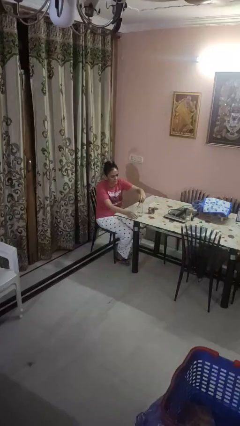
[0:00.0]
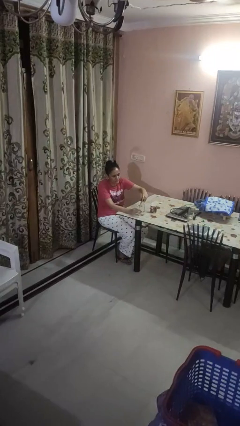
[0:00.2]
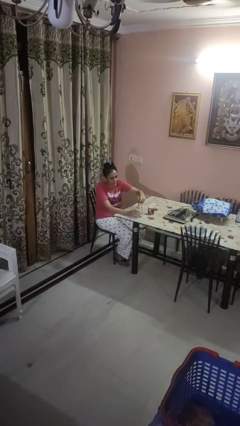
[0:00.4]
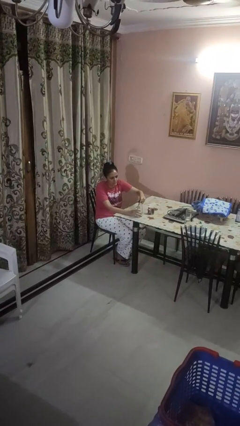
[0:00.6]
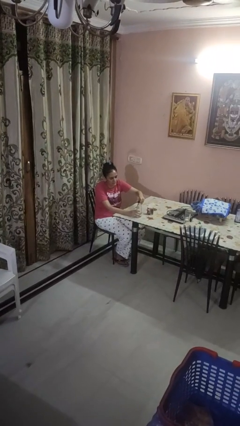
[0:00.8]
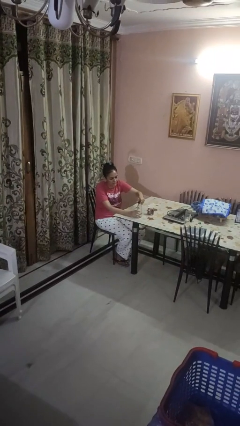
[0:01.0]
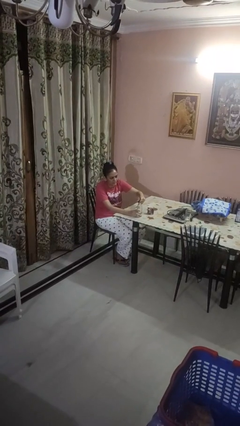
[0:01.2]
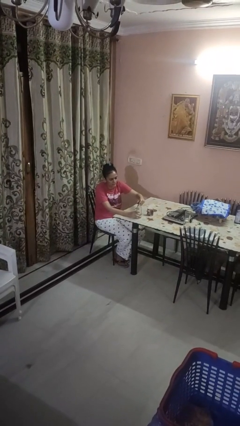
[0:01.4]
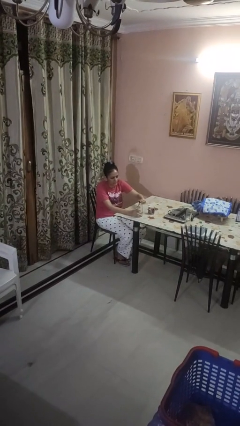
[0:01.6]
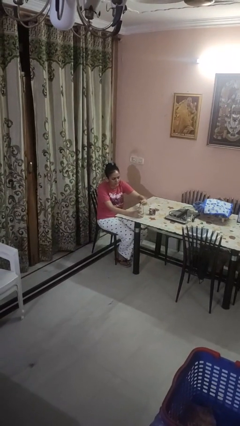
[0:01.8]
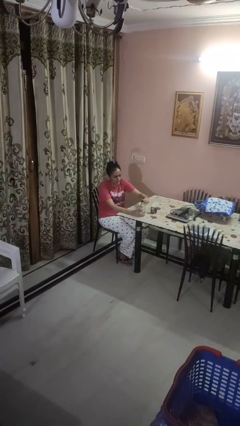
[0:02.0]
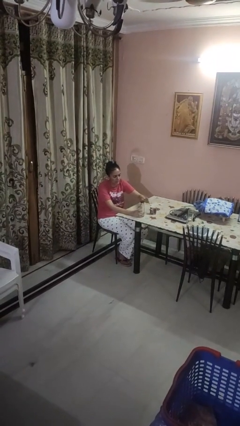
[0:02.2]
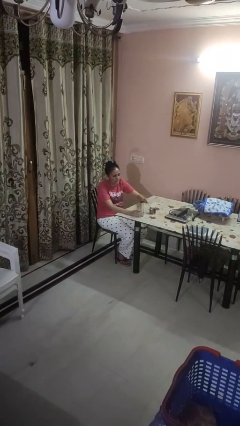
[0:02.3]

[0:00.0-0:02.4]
person screws lid to bottle

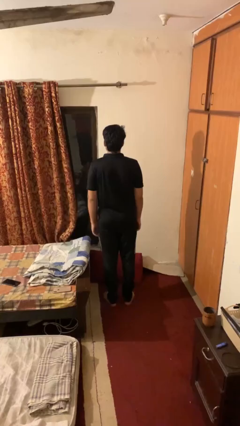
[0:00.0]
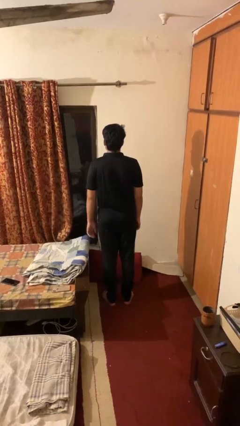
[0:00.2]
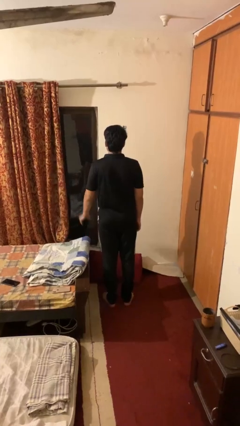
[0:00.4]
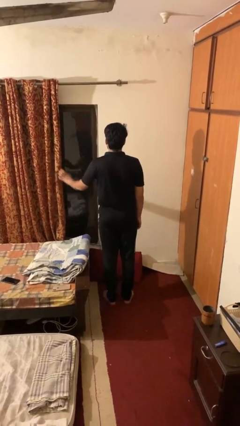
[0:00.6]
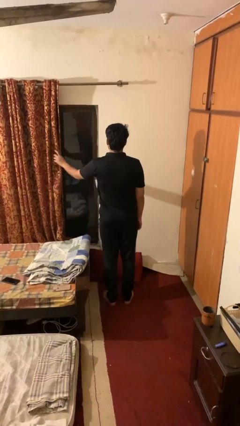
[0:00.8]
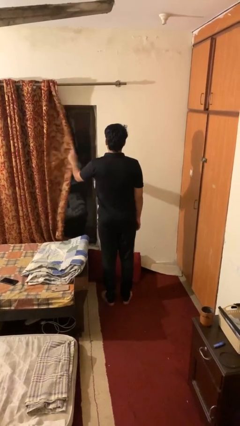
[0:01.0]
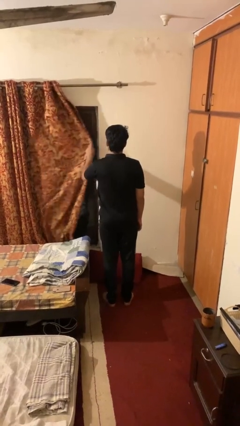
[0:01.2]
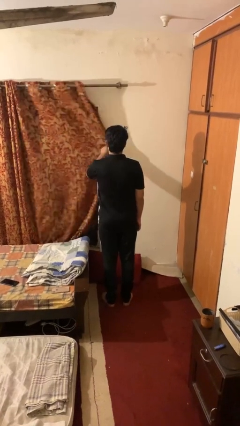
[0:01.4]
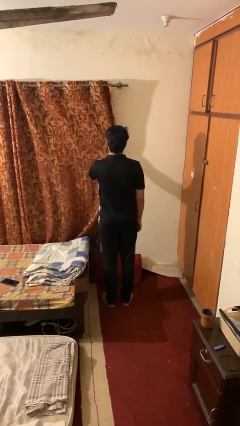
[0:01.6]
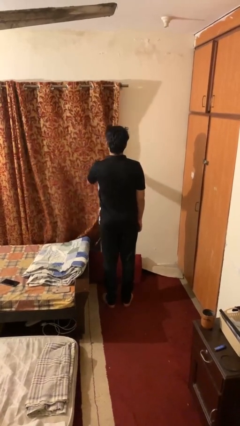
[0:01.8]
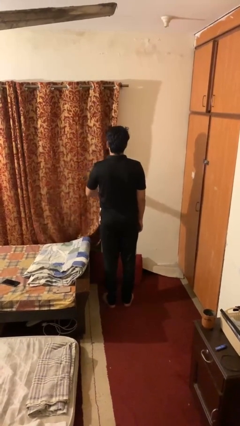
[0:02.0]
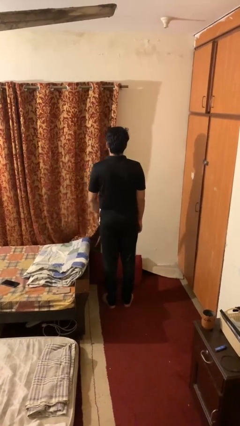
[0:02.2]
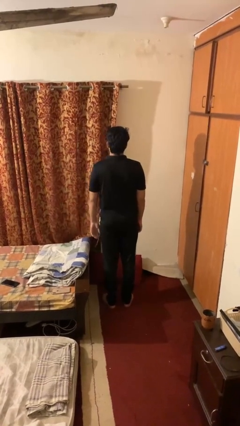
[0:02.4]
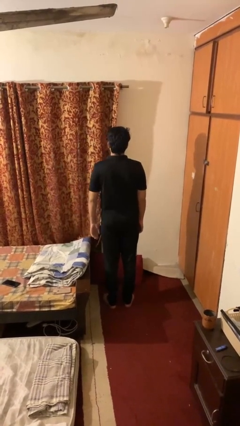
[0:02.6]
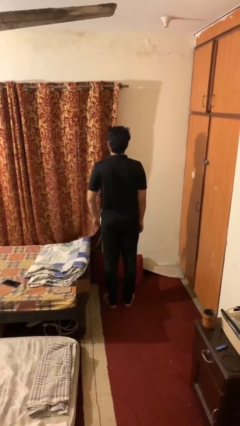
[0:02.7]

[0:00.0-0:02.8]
person closes curtains

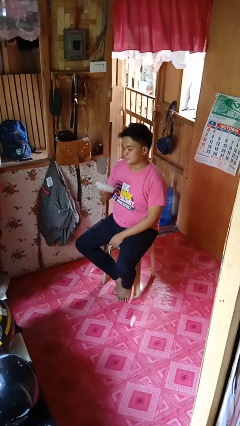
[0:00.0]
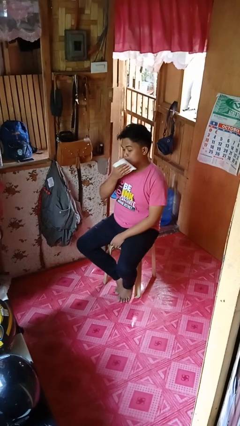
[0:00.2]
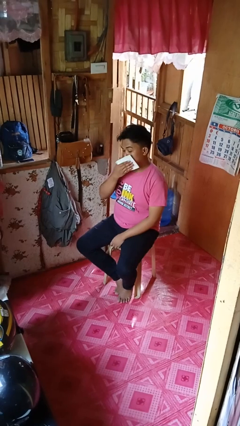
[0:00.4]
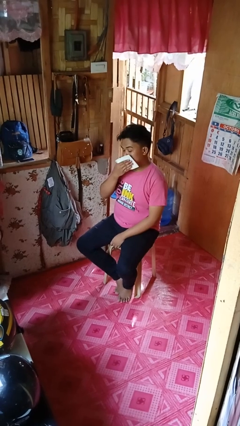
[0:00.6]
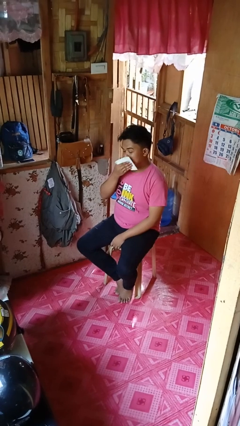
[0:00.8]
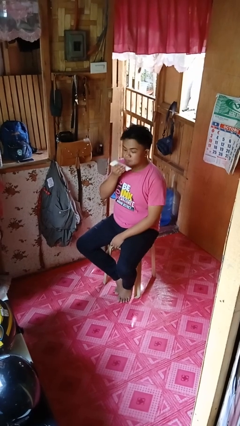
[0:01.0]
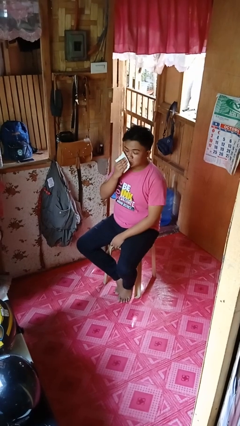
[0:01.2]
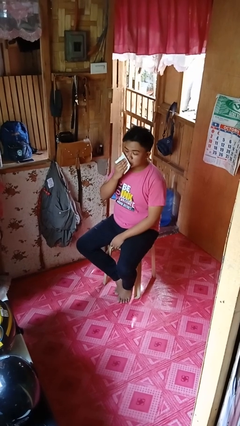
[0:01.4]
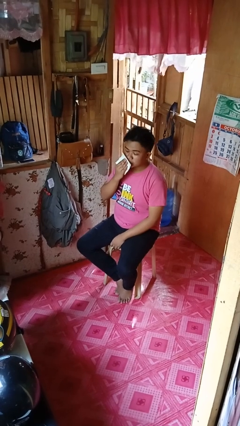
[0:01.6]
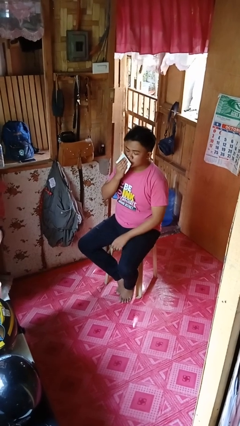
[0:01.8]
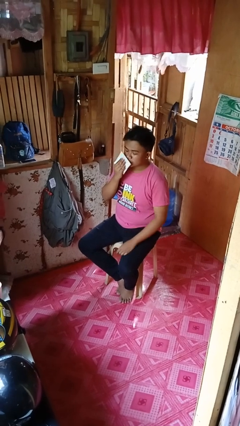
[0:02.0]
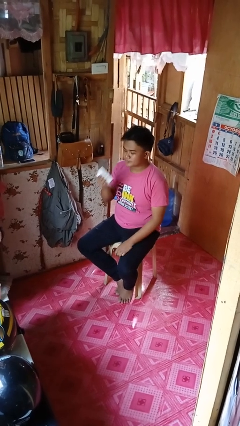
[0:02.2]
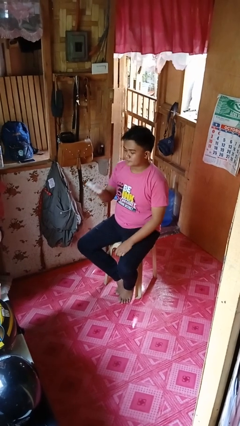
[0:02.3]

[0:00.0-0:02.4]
person wipes mouth with napkin

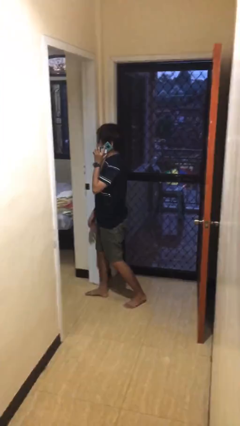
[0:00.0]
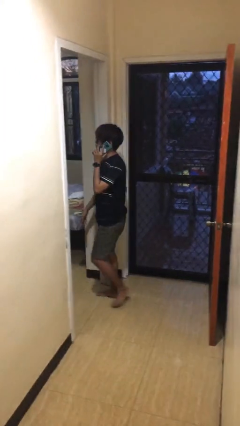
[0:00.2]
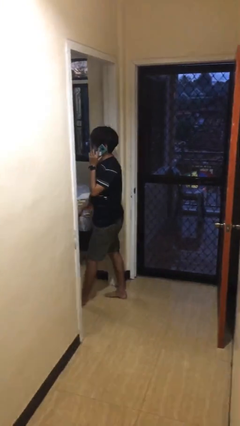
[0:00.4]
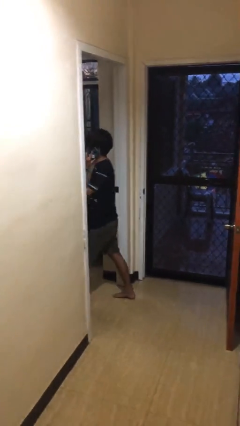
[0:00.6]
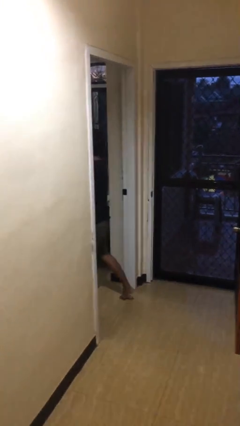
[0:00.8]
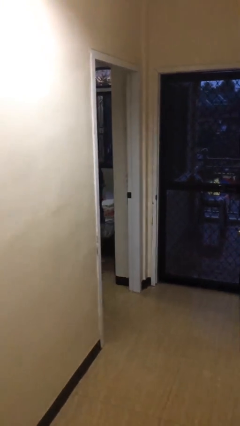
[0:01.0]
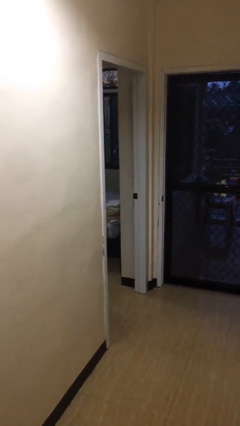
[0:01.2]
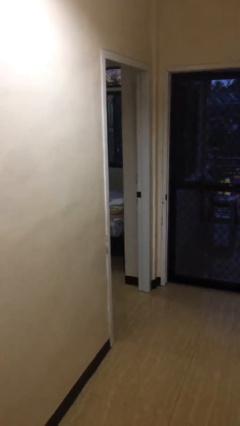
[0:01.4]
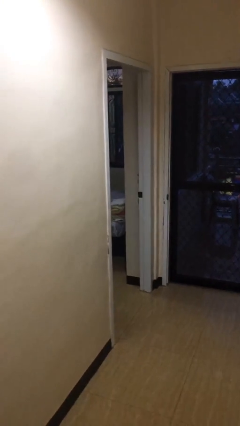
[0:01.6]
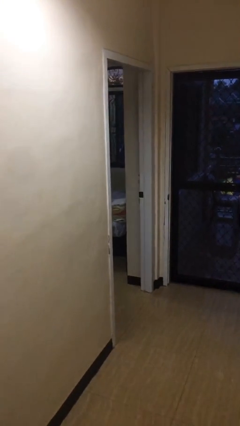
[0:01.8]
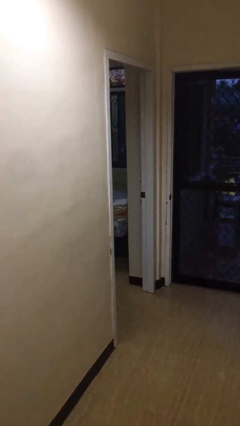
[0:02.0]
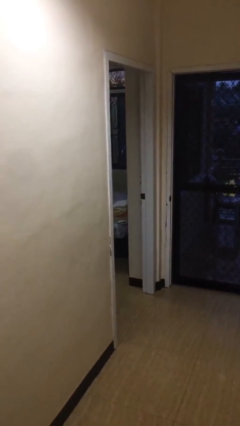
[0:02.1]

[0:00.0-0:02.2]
person exits scene through structure

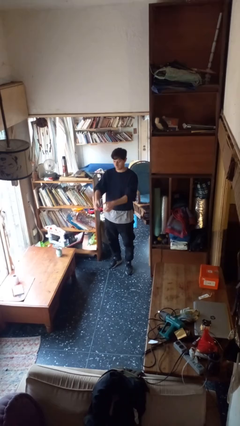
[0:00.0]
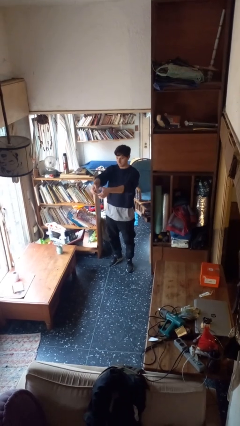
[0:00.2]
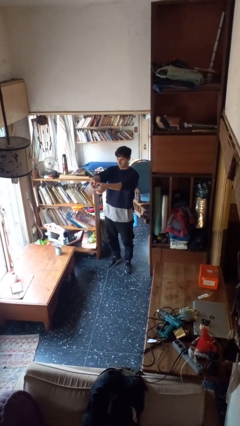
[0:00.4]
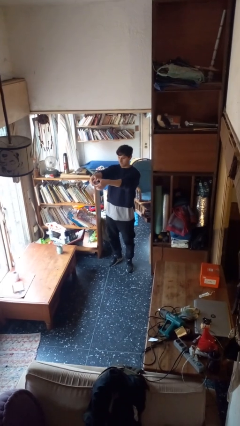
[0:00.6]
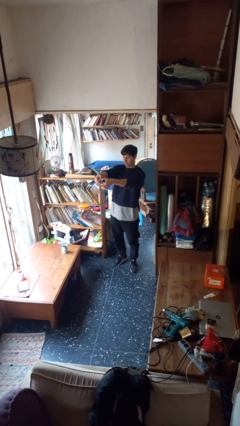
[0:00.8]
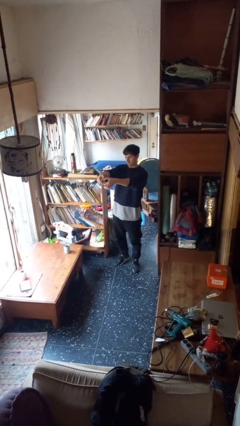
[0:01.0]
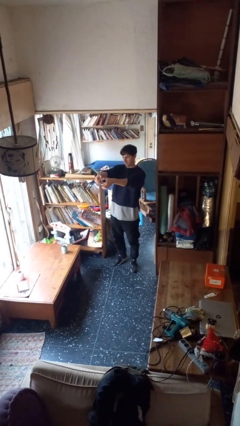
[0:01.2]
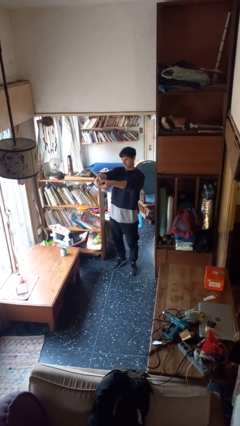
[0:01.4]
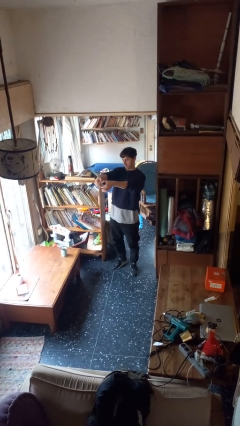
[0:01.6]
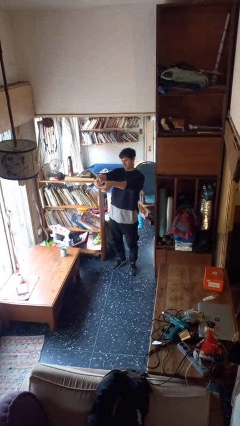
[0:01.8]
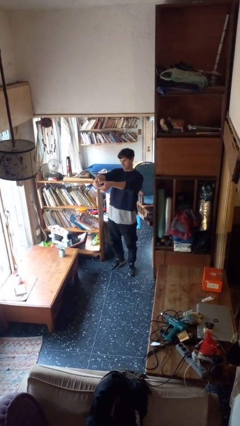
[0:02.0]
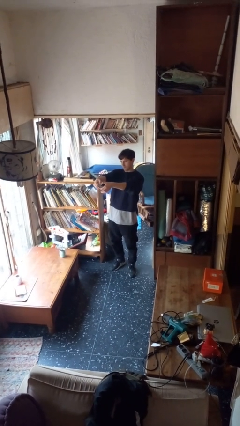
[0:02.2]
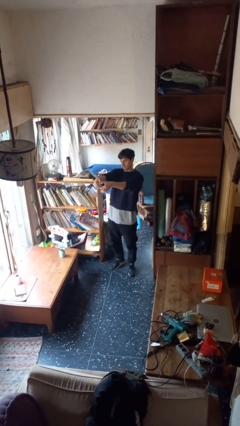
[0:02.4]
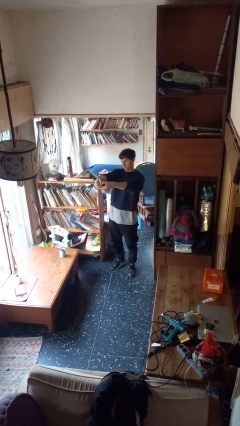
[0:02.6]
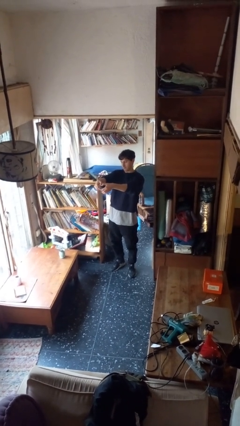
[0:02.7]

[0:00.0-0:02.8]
person gestures heart

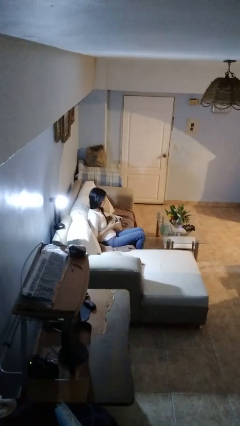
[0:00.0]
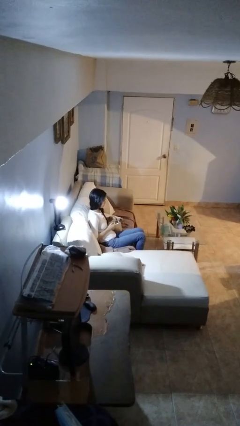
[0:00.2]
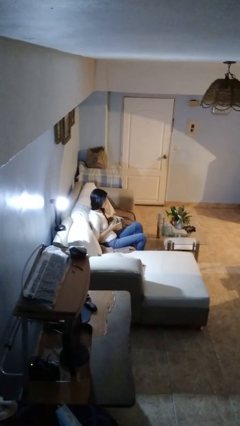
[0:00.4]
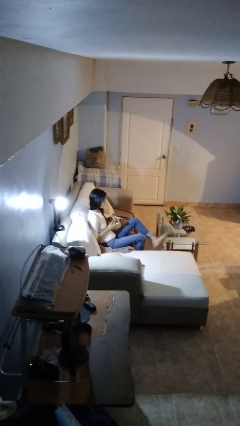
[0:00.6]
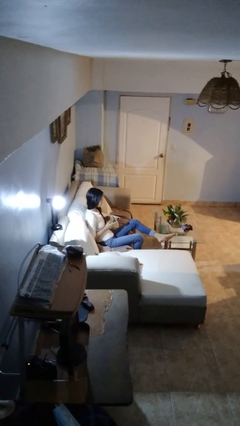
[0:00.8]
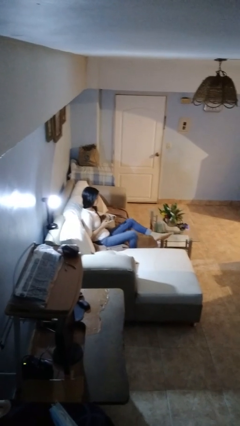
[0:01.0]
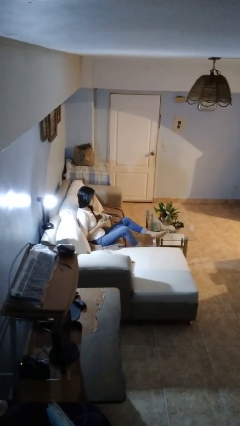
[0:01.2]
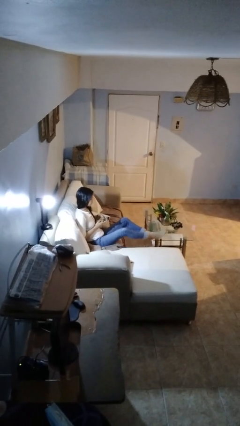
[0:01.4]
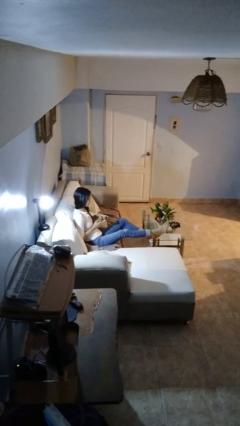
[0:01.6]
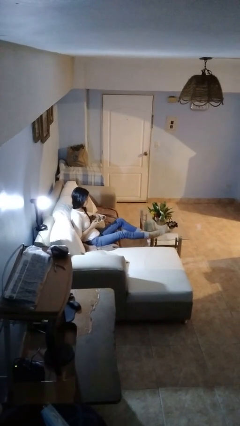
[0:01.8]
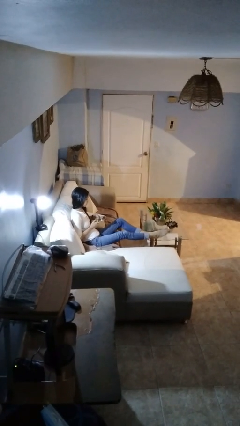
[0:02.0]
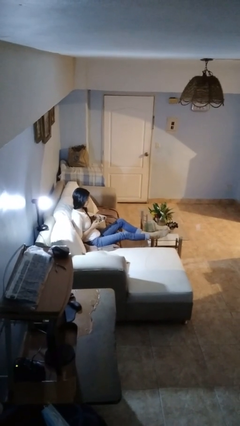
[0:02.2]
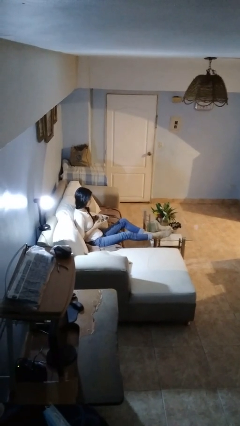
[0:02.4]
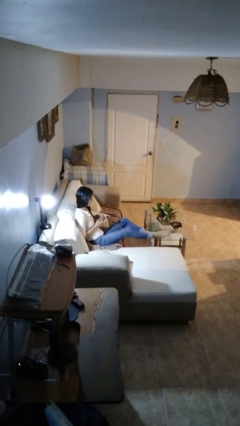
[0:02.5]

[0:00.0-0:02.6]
person puts feet up

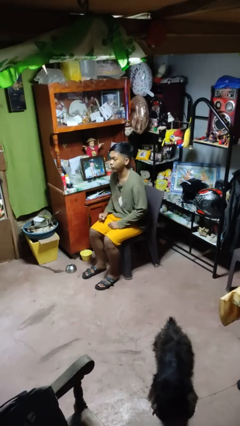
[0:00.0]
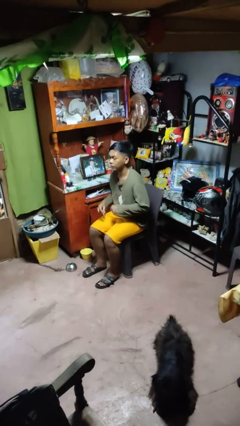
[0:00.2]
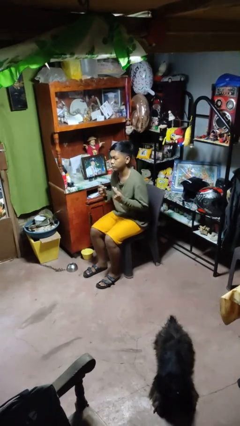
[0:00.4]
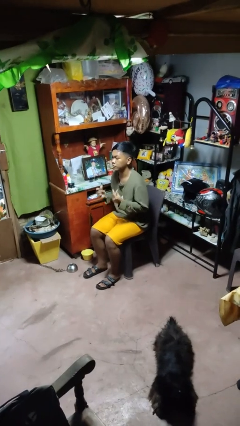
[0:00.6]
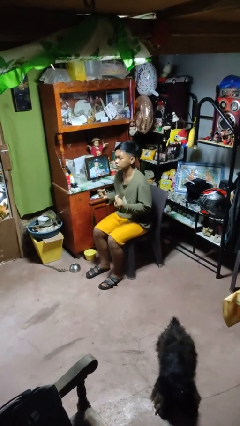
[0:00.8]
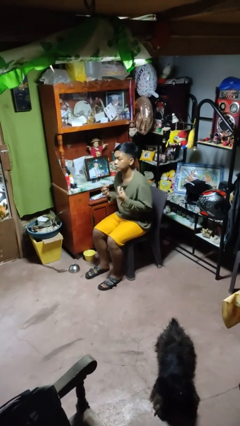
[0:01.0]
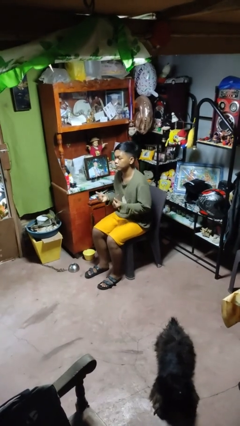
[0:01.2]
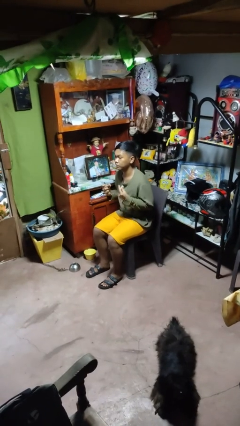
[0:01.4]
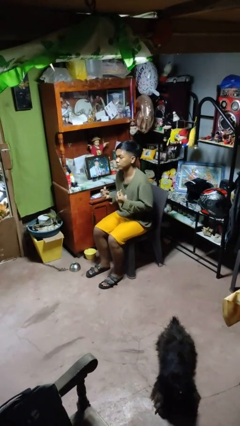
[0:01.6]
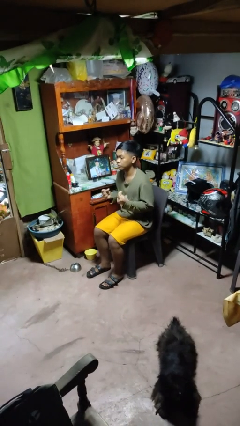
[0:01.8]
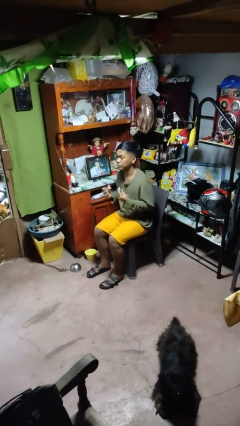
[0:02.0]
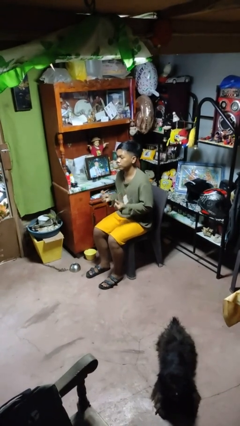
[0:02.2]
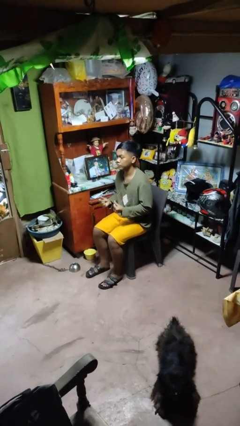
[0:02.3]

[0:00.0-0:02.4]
person snaps fingers
